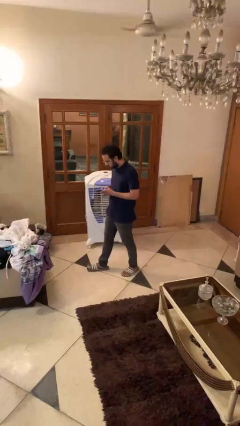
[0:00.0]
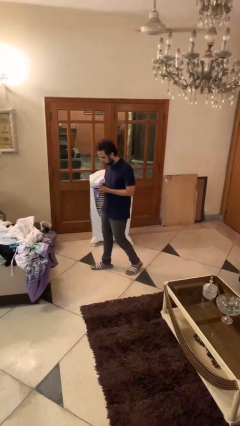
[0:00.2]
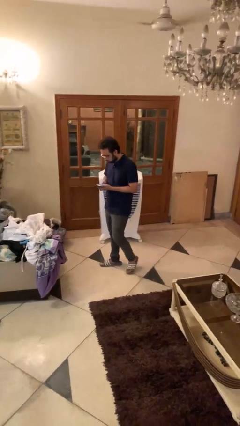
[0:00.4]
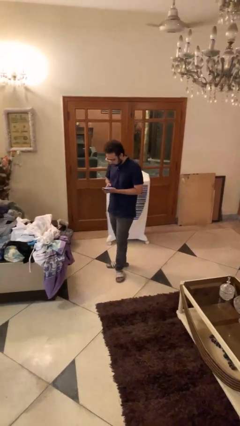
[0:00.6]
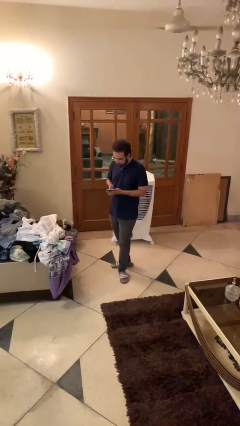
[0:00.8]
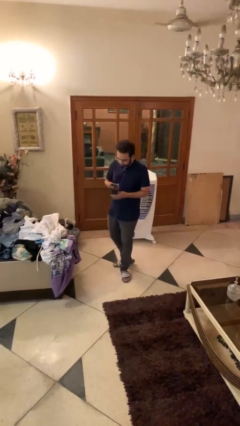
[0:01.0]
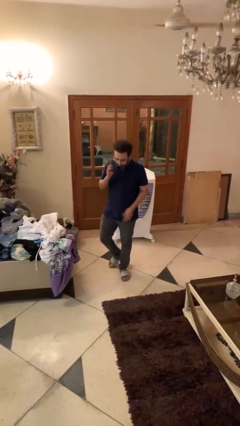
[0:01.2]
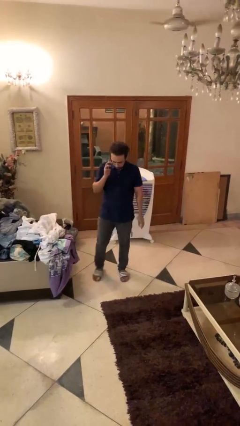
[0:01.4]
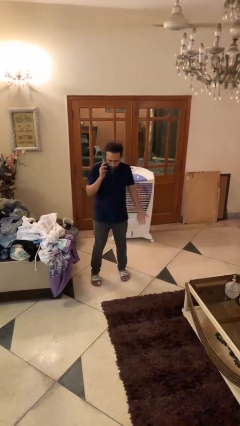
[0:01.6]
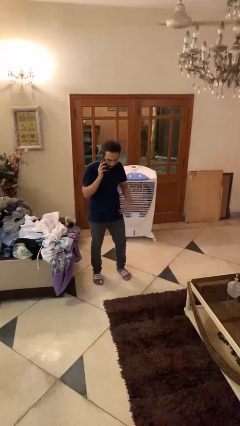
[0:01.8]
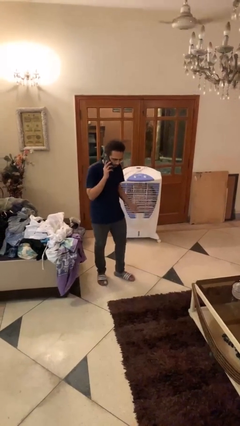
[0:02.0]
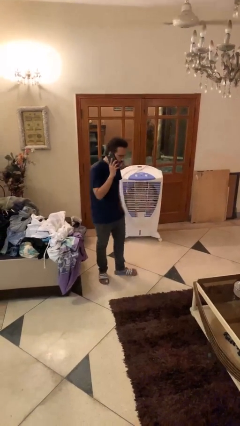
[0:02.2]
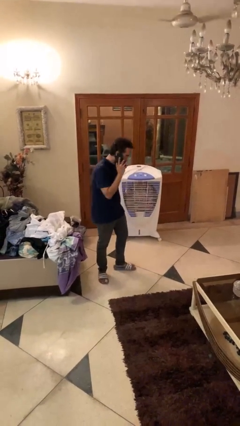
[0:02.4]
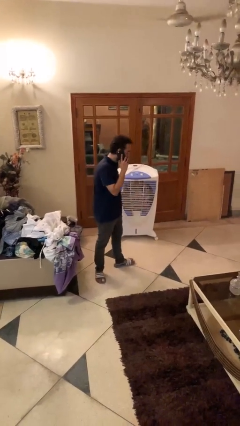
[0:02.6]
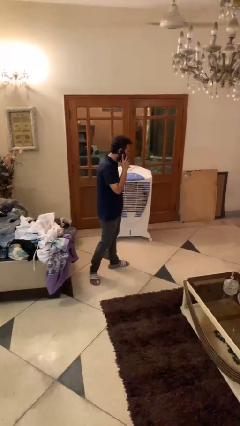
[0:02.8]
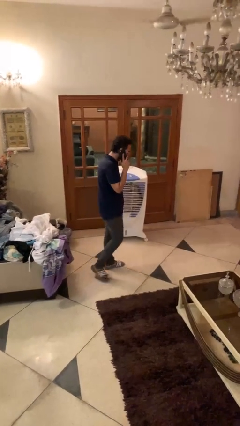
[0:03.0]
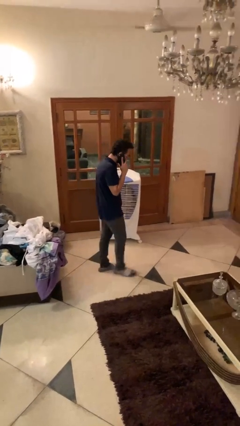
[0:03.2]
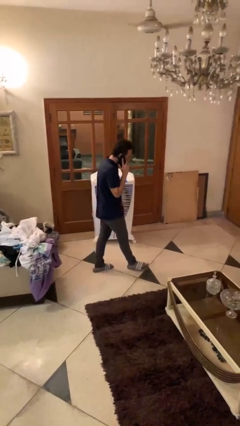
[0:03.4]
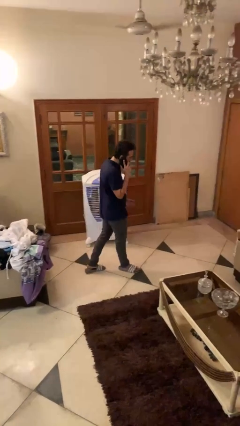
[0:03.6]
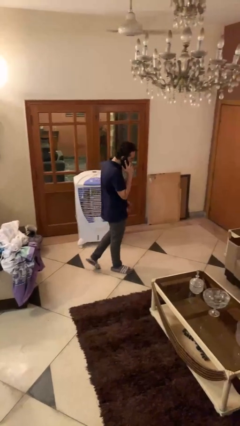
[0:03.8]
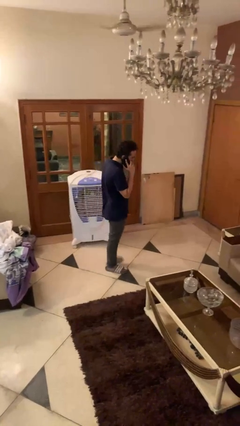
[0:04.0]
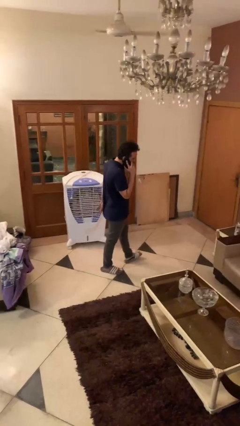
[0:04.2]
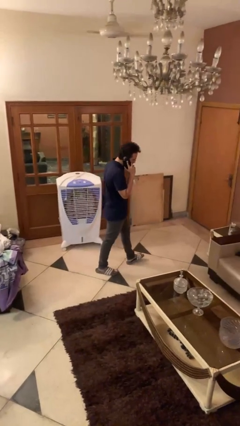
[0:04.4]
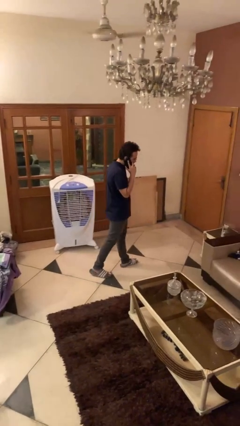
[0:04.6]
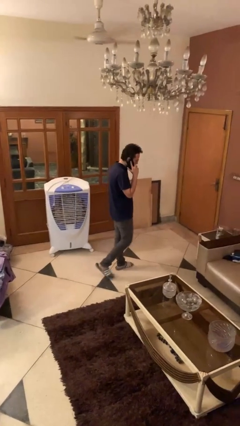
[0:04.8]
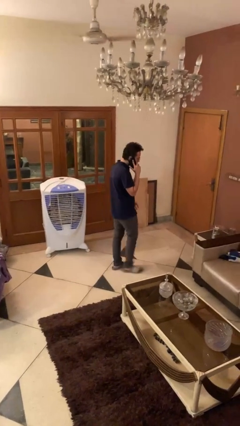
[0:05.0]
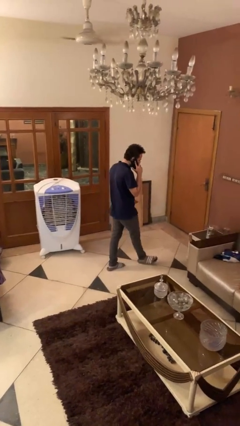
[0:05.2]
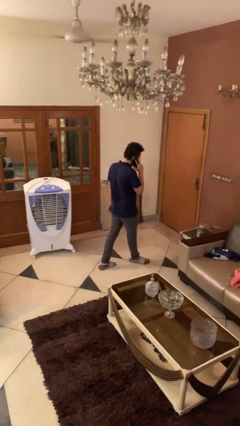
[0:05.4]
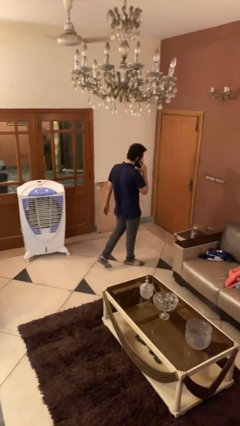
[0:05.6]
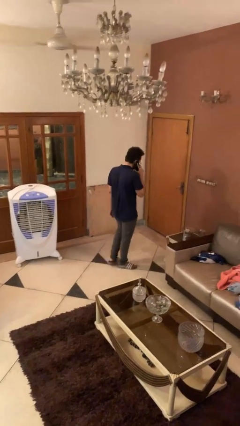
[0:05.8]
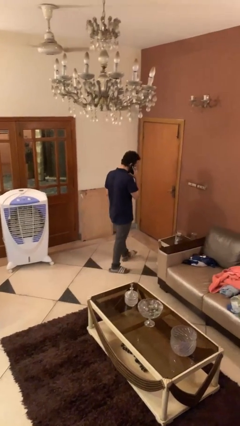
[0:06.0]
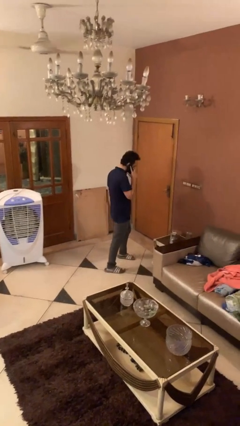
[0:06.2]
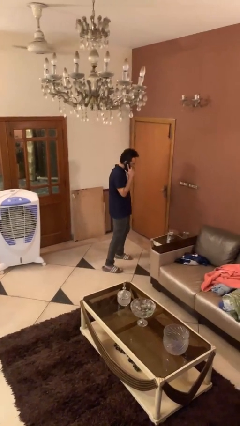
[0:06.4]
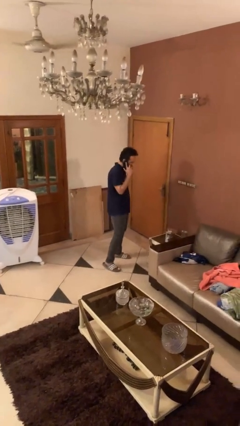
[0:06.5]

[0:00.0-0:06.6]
person talks on phone

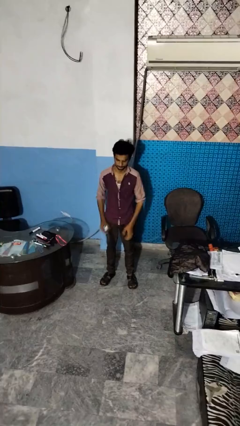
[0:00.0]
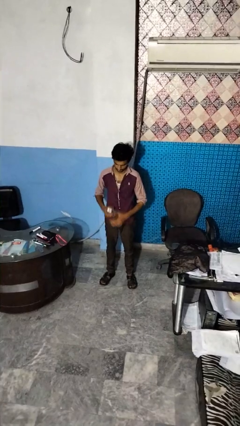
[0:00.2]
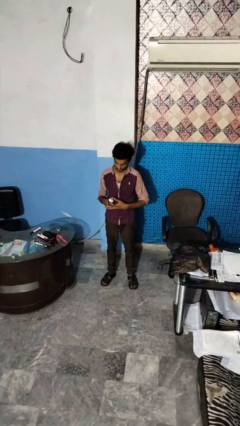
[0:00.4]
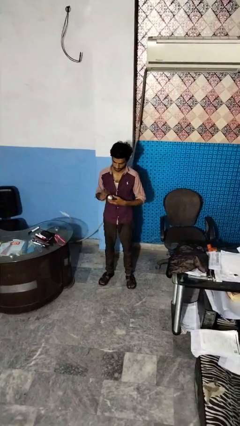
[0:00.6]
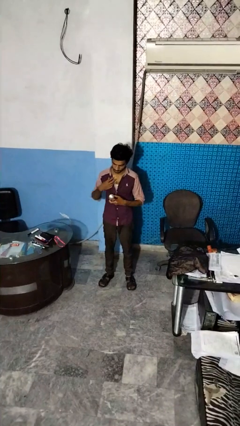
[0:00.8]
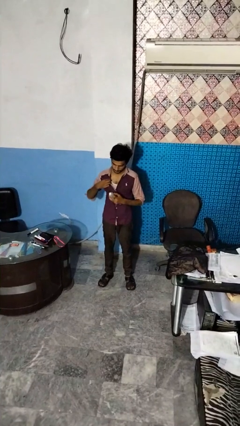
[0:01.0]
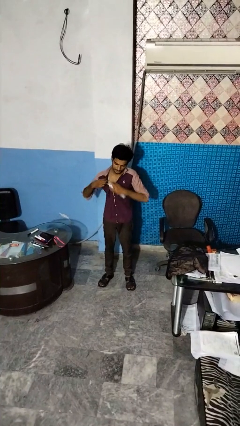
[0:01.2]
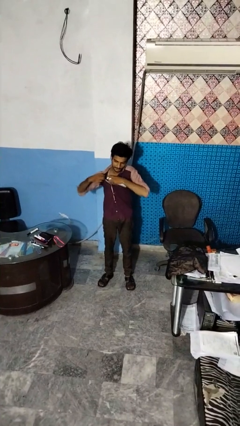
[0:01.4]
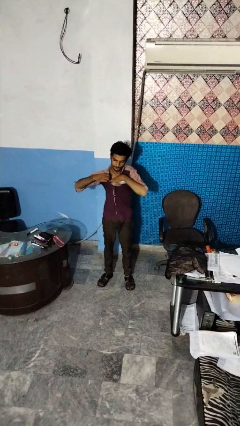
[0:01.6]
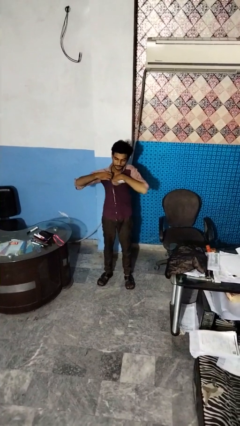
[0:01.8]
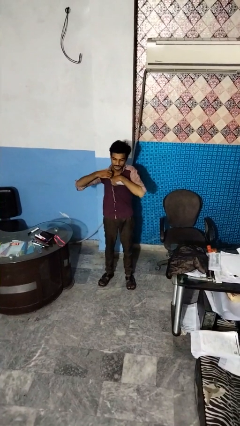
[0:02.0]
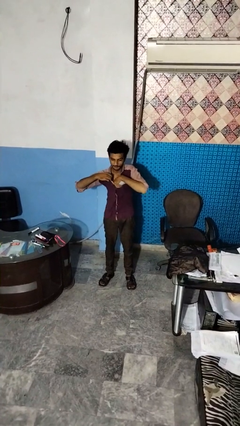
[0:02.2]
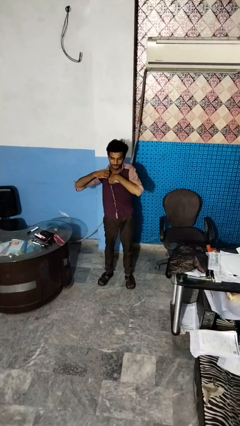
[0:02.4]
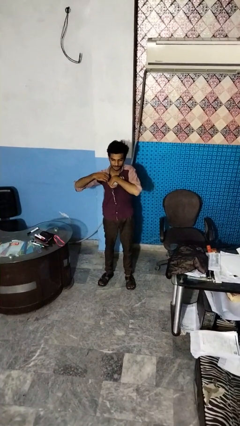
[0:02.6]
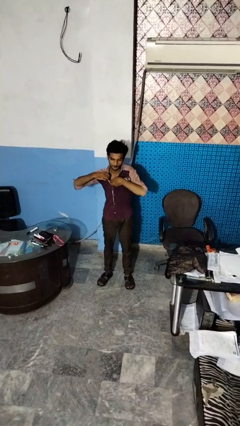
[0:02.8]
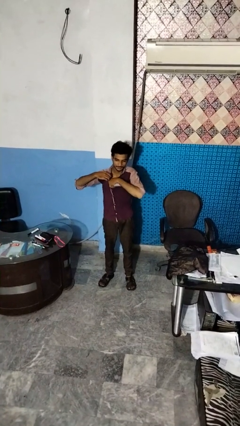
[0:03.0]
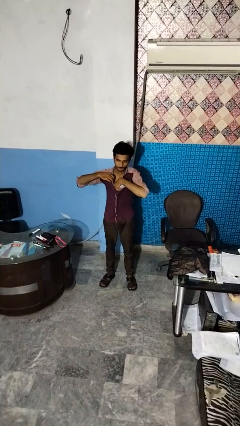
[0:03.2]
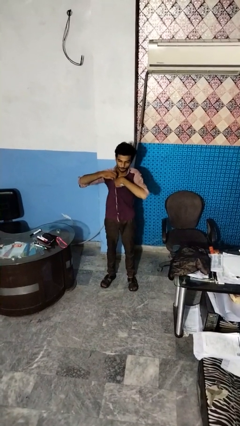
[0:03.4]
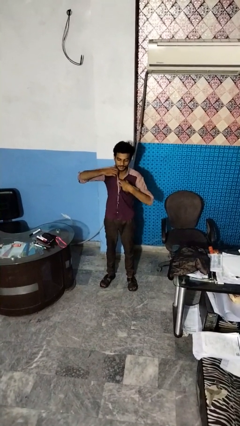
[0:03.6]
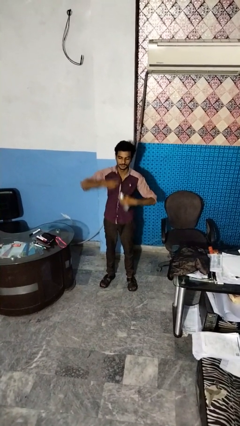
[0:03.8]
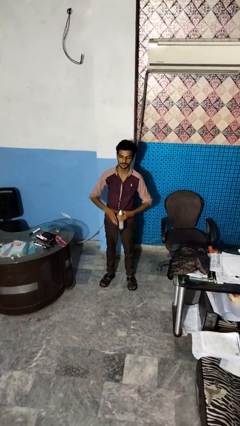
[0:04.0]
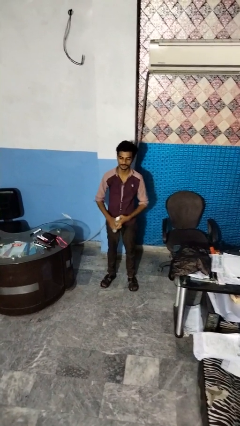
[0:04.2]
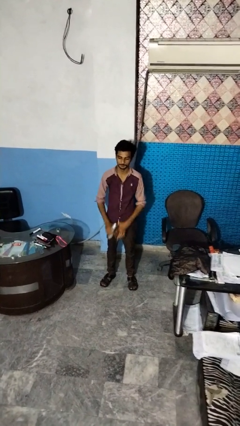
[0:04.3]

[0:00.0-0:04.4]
person applies deodorant

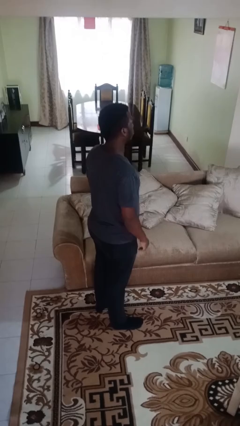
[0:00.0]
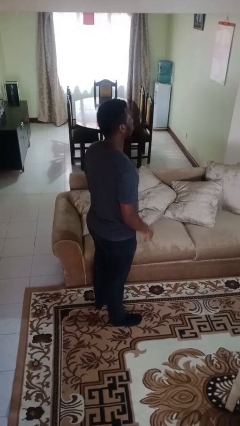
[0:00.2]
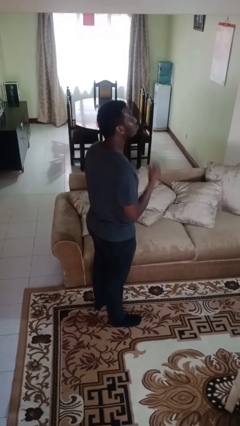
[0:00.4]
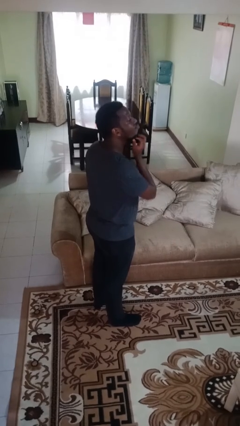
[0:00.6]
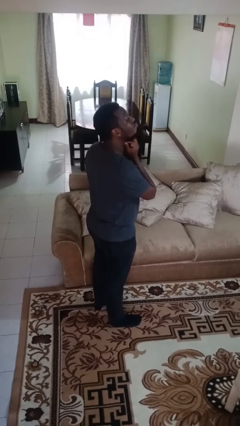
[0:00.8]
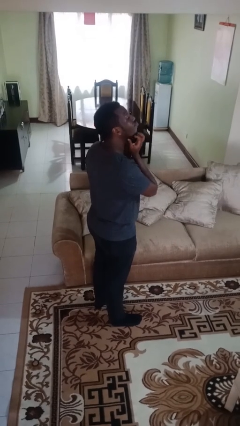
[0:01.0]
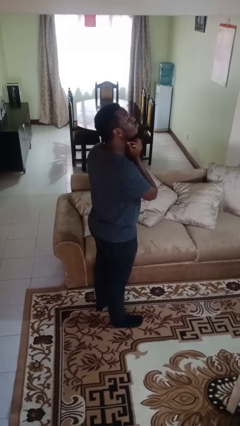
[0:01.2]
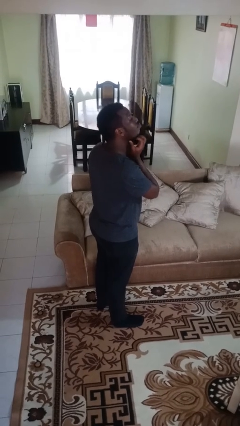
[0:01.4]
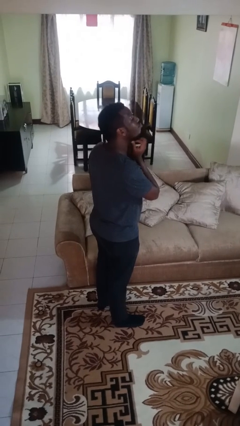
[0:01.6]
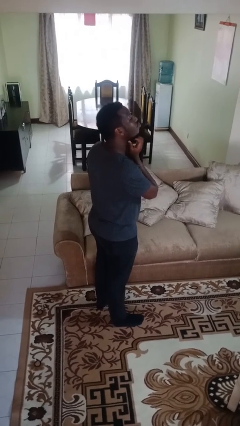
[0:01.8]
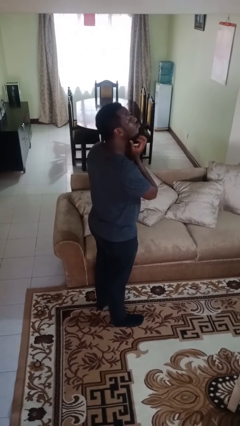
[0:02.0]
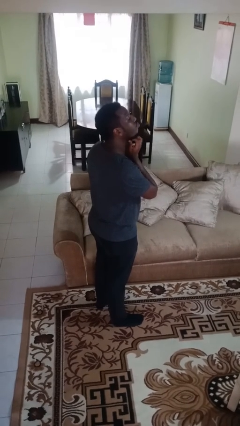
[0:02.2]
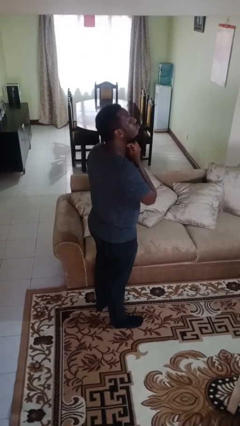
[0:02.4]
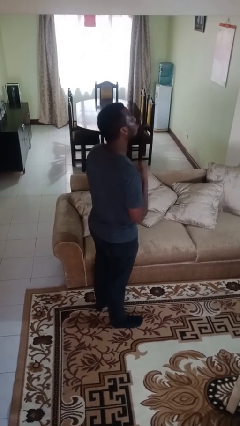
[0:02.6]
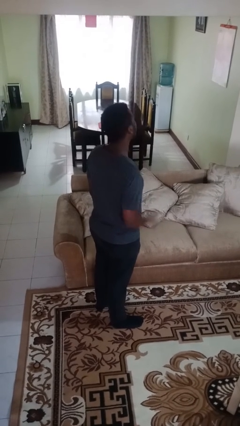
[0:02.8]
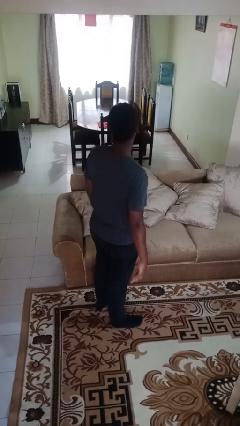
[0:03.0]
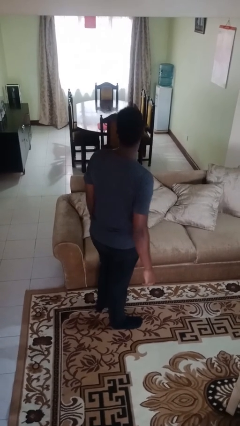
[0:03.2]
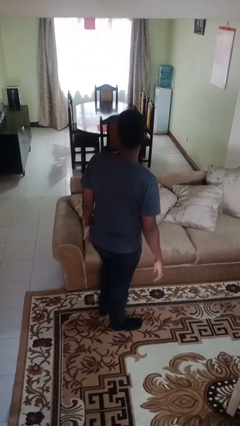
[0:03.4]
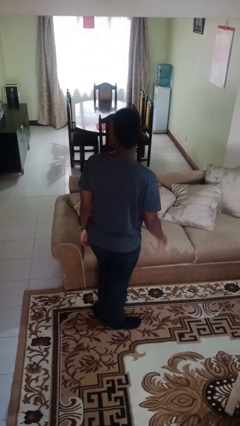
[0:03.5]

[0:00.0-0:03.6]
person strokes chin

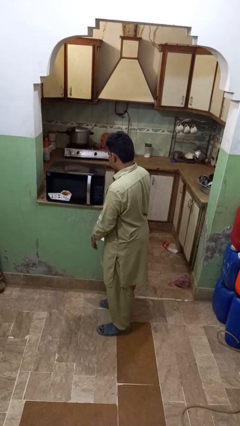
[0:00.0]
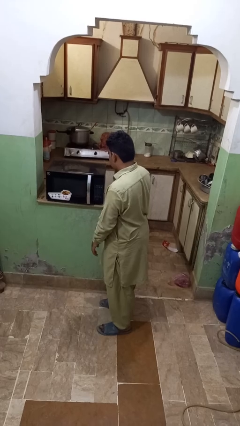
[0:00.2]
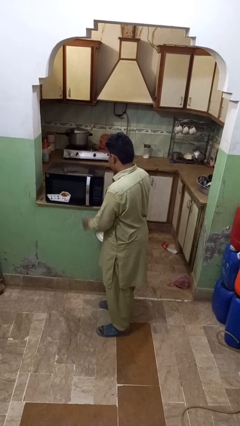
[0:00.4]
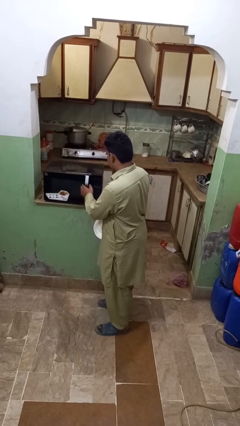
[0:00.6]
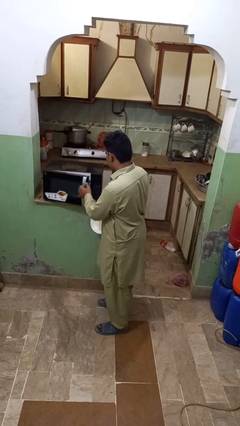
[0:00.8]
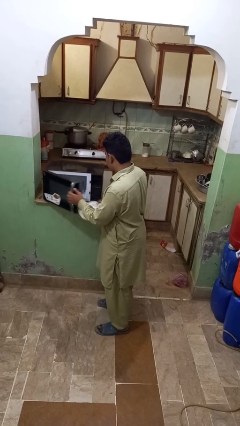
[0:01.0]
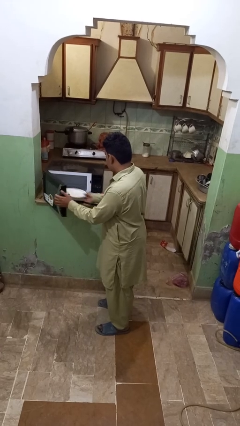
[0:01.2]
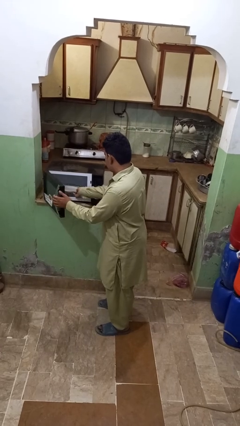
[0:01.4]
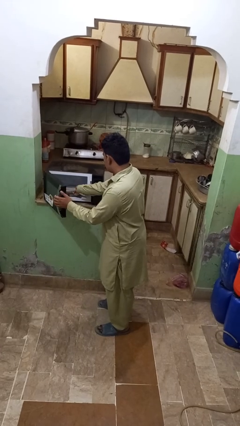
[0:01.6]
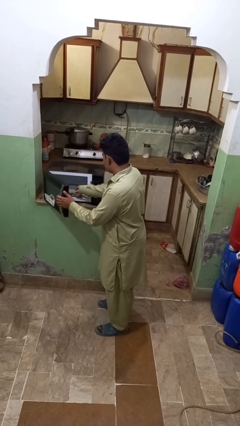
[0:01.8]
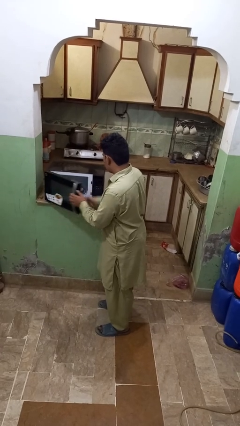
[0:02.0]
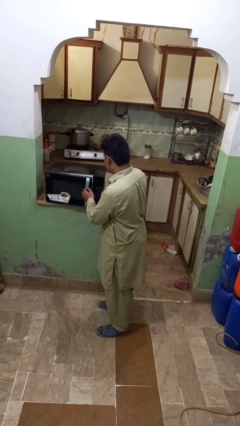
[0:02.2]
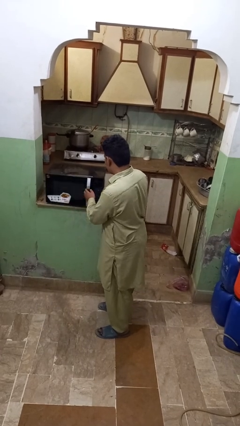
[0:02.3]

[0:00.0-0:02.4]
person puts object into microwave

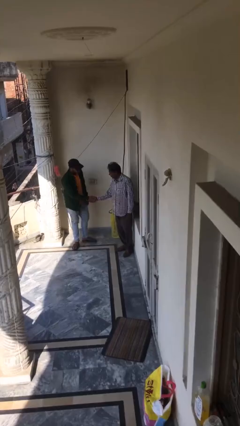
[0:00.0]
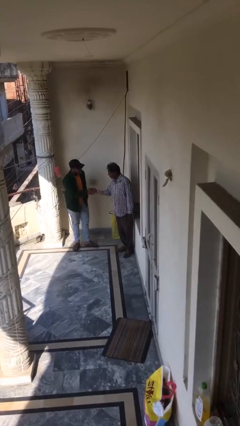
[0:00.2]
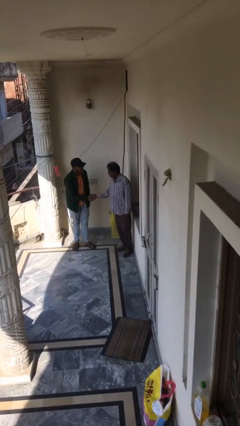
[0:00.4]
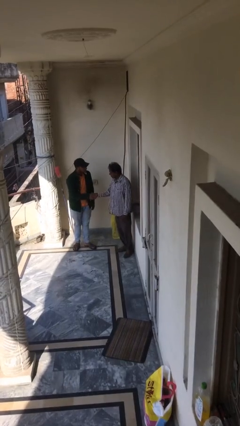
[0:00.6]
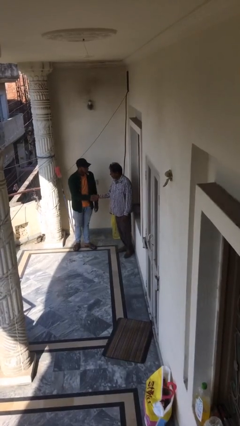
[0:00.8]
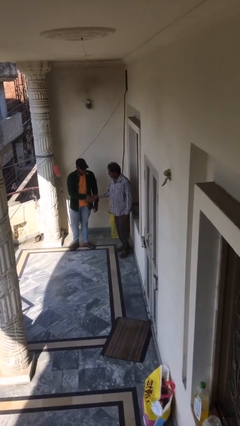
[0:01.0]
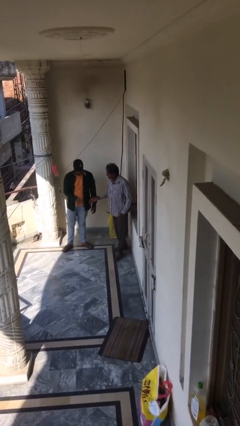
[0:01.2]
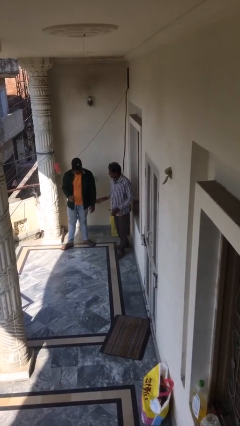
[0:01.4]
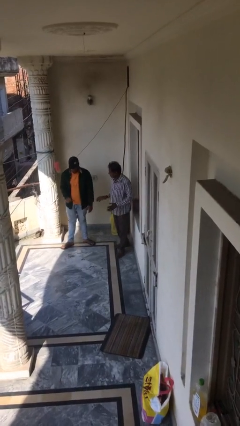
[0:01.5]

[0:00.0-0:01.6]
person shakes hand
